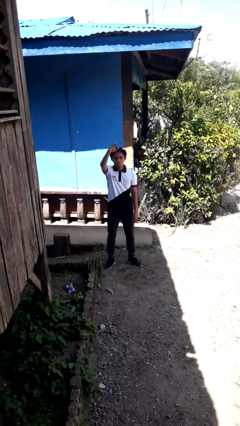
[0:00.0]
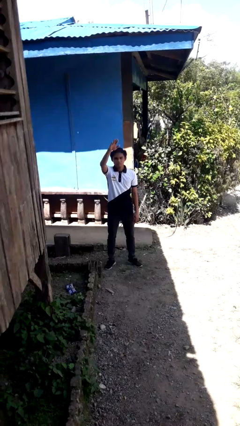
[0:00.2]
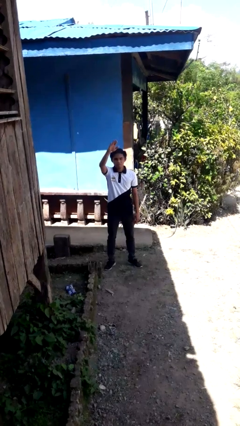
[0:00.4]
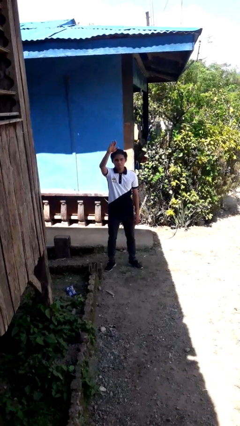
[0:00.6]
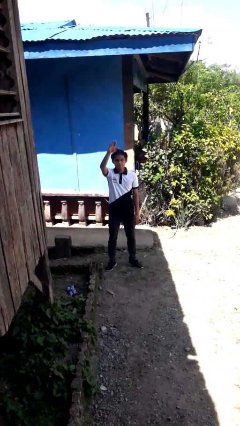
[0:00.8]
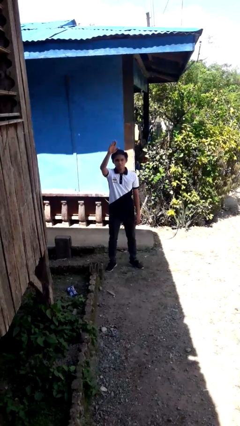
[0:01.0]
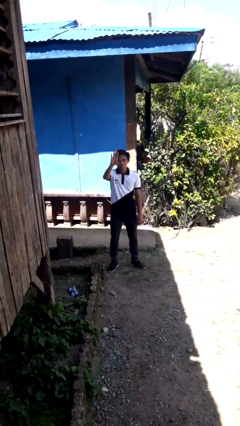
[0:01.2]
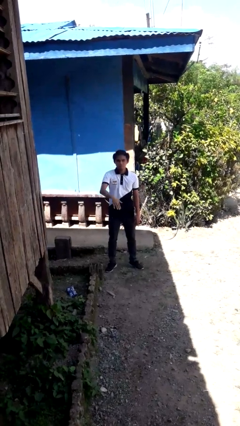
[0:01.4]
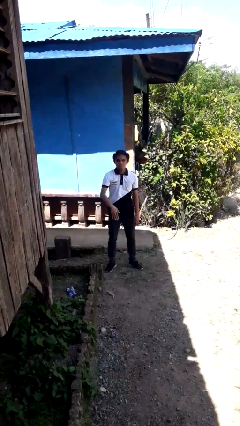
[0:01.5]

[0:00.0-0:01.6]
person gestures swipe up

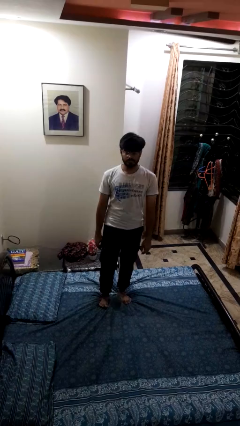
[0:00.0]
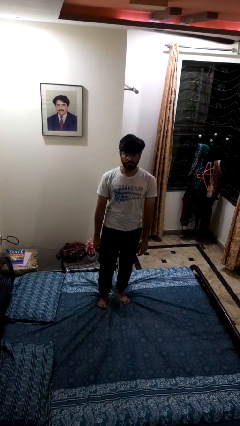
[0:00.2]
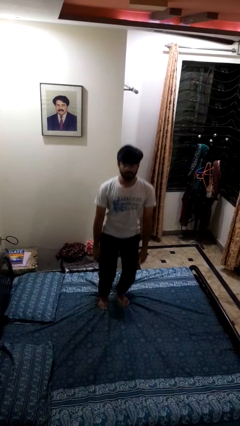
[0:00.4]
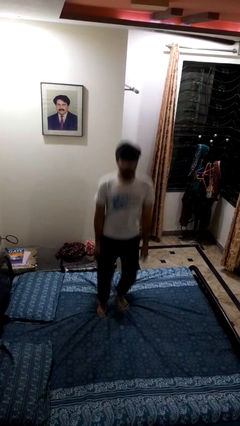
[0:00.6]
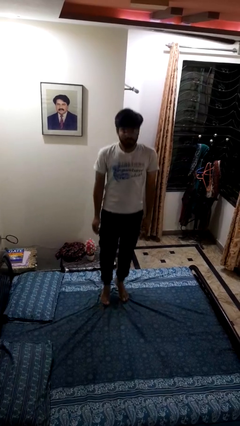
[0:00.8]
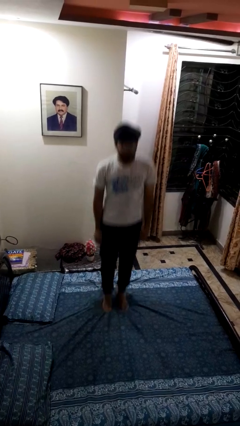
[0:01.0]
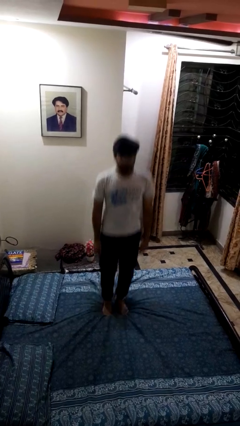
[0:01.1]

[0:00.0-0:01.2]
person jumps on bed

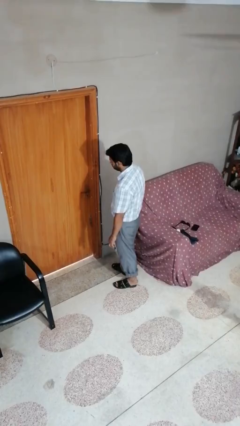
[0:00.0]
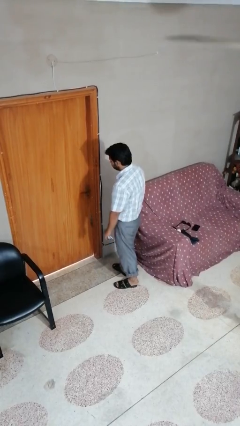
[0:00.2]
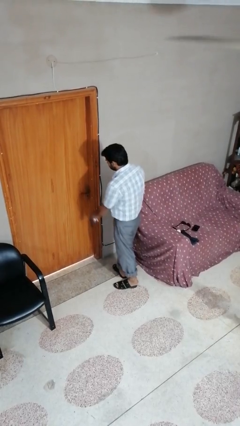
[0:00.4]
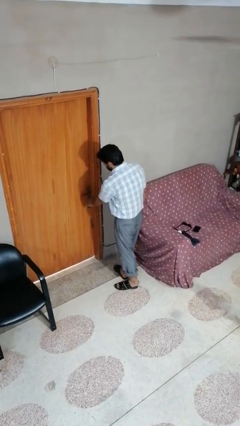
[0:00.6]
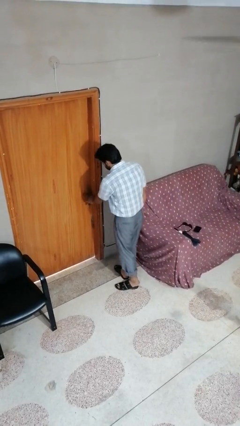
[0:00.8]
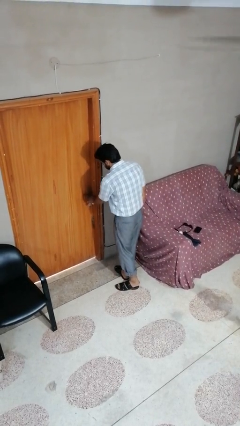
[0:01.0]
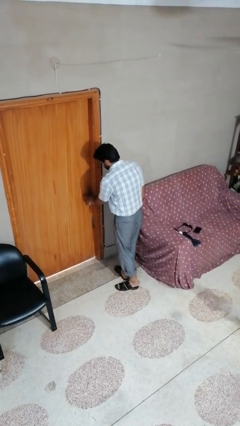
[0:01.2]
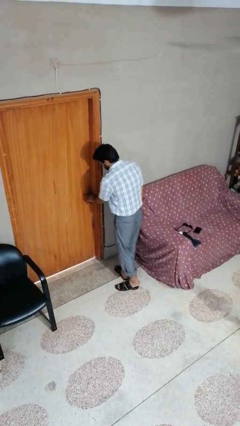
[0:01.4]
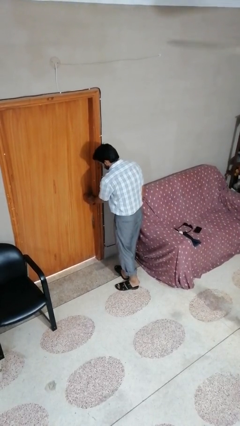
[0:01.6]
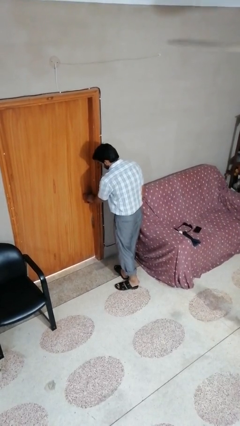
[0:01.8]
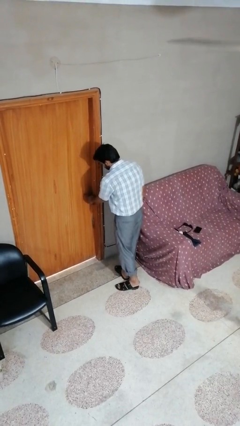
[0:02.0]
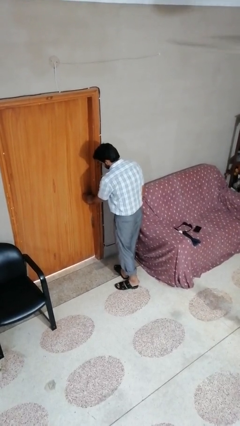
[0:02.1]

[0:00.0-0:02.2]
person unlocks door with keys

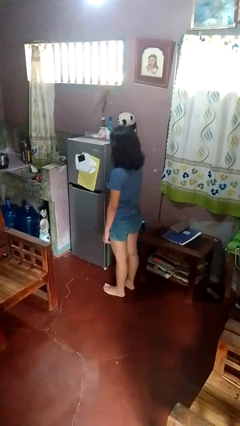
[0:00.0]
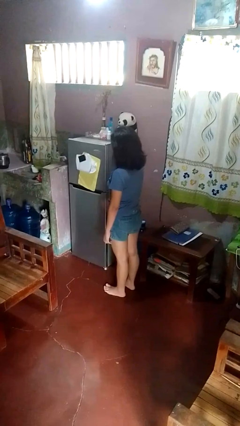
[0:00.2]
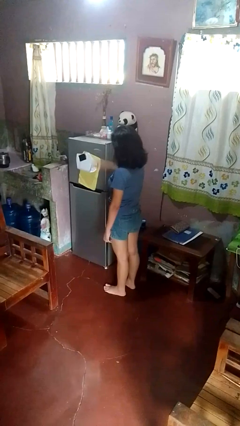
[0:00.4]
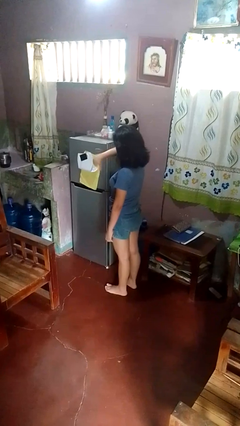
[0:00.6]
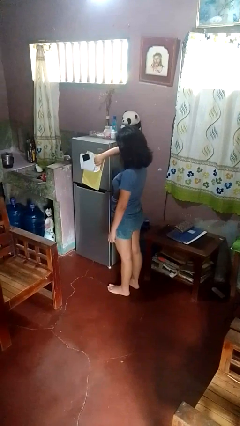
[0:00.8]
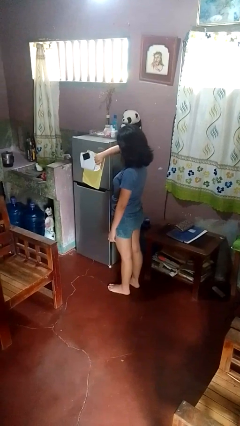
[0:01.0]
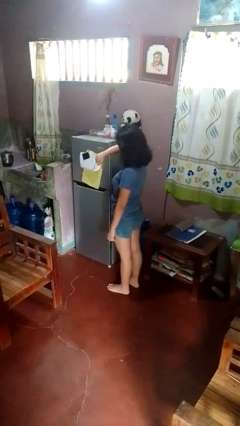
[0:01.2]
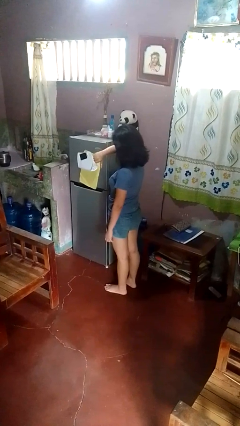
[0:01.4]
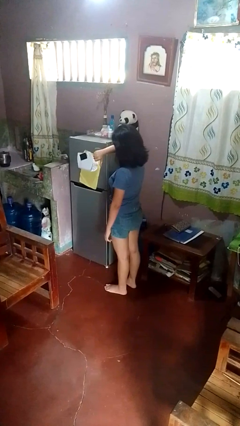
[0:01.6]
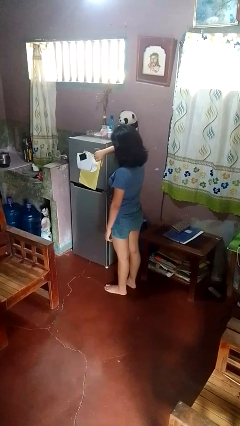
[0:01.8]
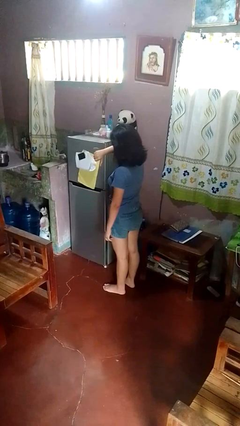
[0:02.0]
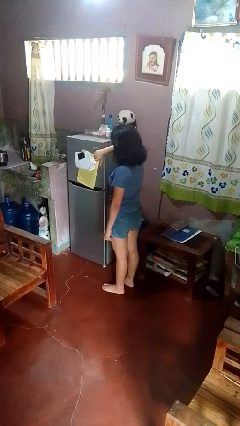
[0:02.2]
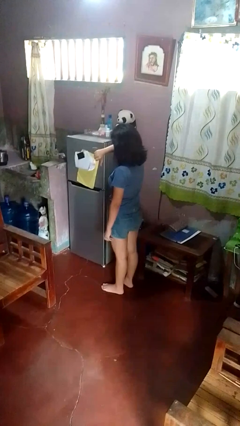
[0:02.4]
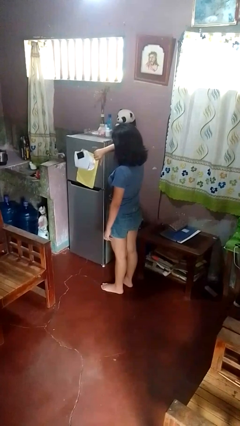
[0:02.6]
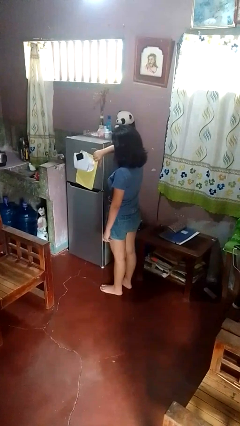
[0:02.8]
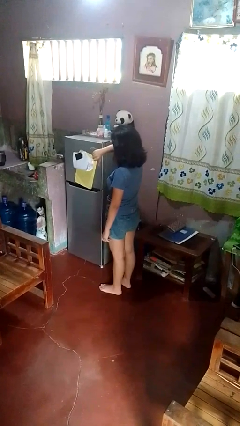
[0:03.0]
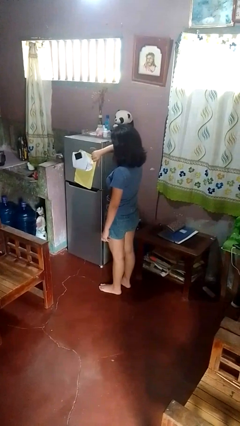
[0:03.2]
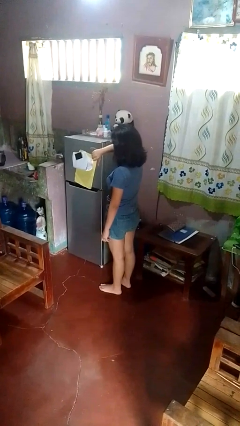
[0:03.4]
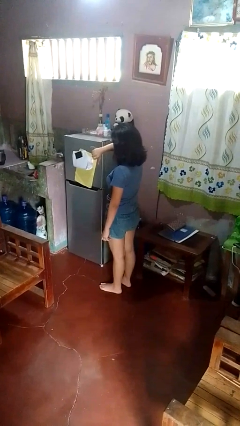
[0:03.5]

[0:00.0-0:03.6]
person gestures thumbs down

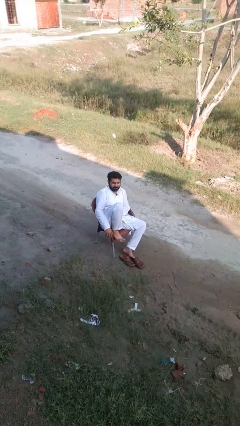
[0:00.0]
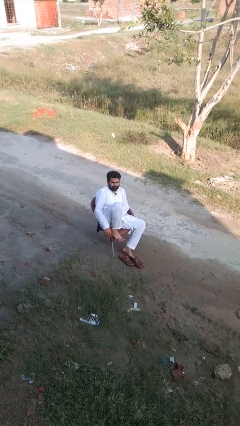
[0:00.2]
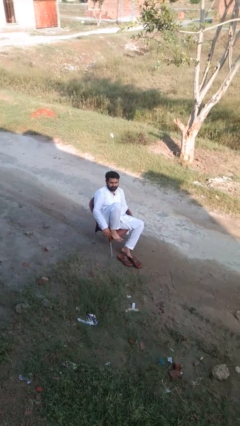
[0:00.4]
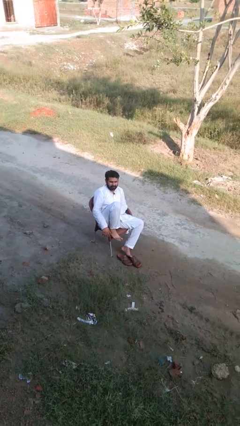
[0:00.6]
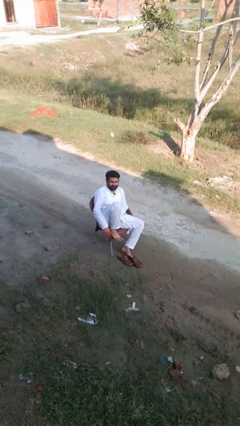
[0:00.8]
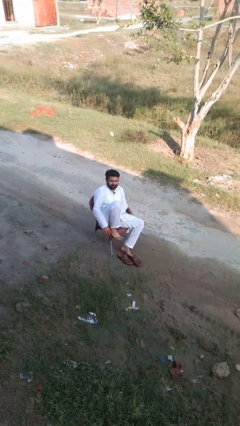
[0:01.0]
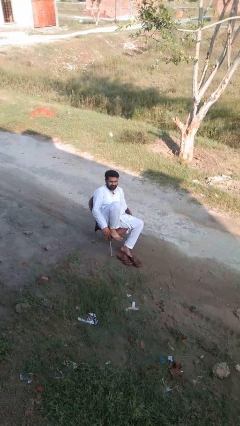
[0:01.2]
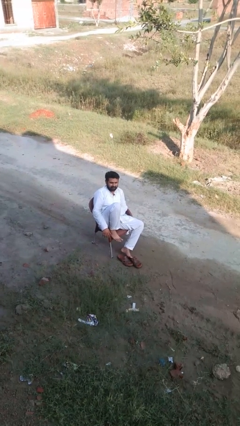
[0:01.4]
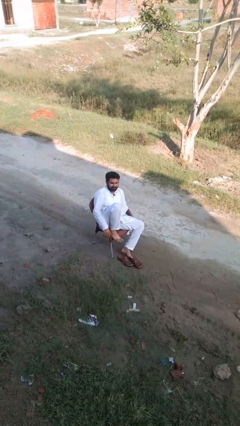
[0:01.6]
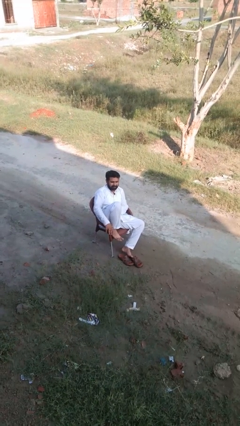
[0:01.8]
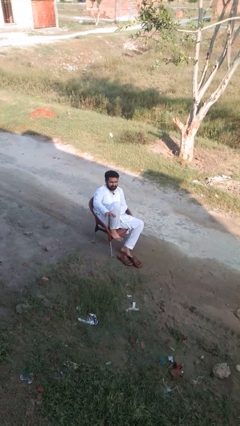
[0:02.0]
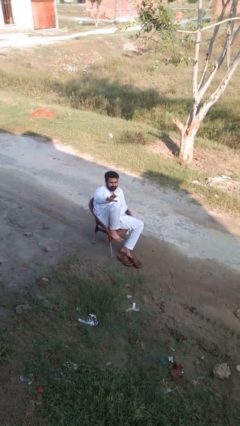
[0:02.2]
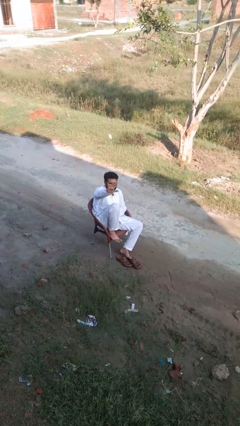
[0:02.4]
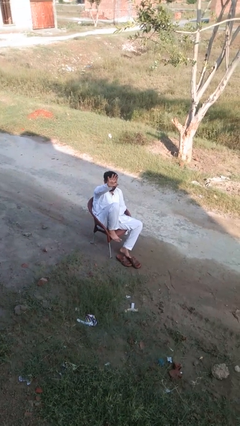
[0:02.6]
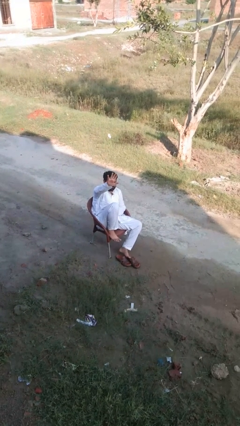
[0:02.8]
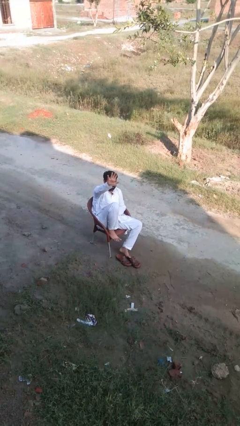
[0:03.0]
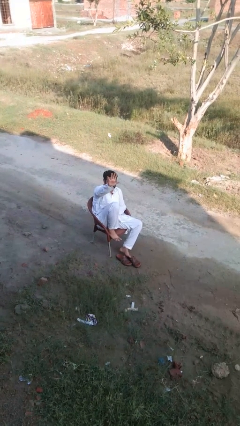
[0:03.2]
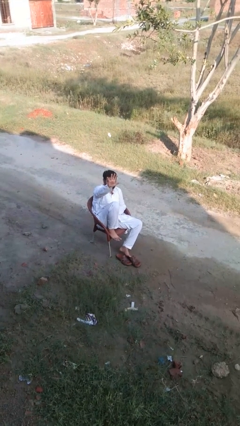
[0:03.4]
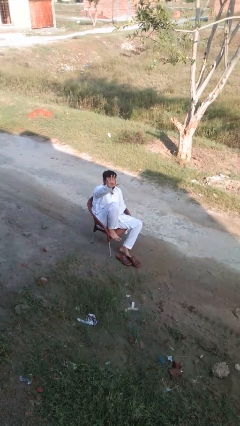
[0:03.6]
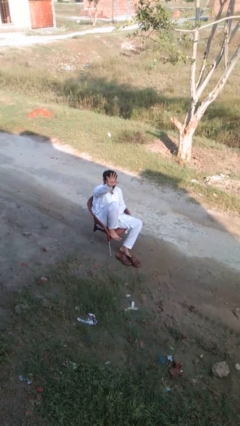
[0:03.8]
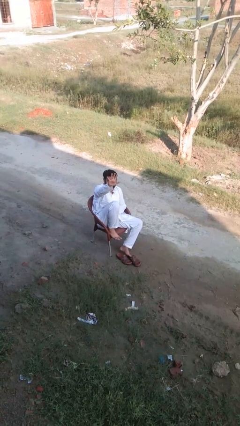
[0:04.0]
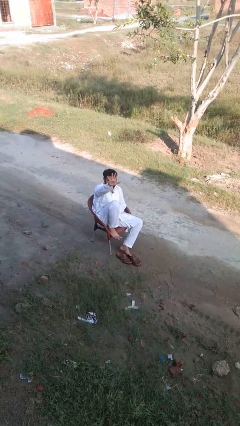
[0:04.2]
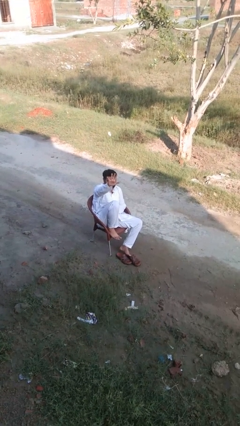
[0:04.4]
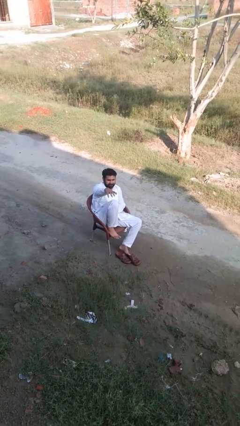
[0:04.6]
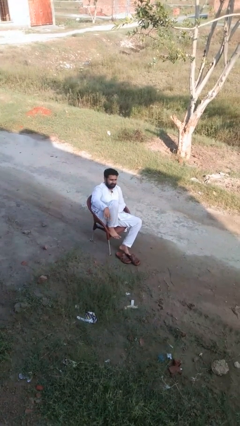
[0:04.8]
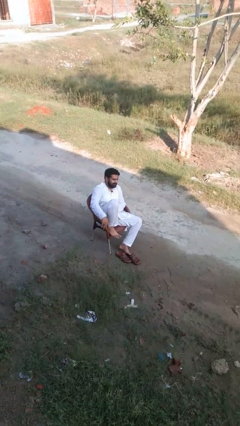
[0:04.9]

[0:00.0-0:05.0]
person gestures number five

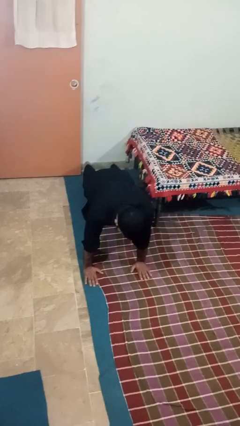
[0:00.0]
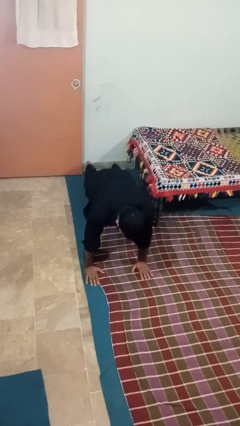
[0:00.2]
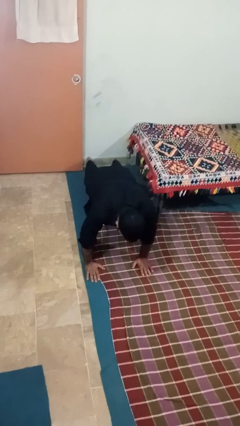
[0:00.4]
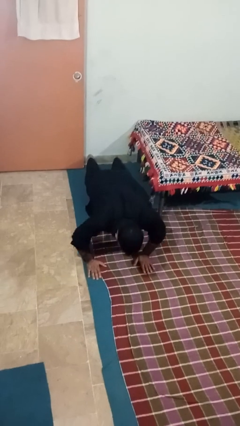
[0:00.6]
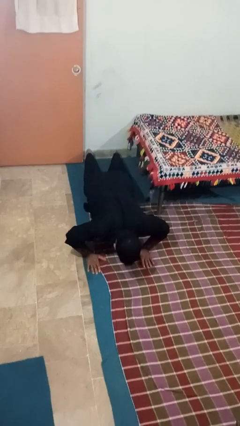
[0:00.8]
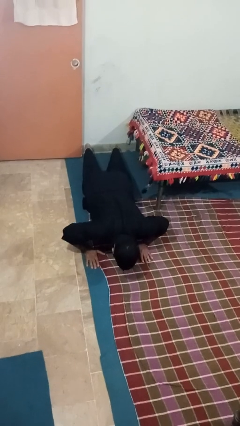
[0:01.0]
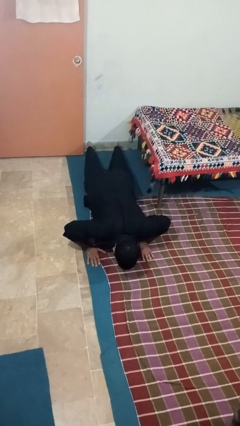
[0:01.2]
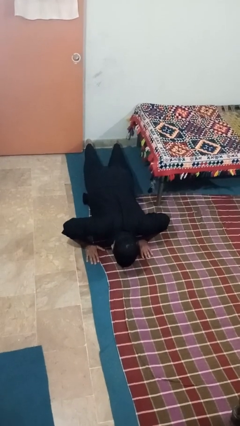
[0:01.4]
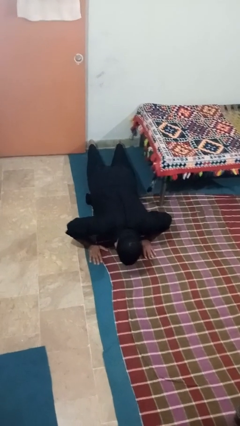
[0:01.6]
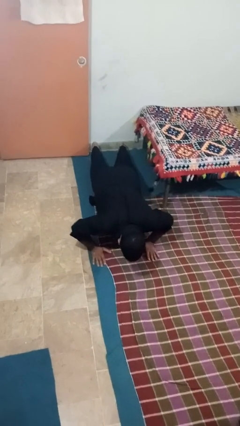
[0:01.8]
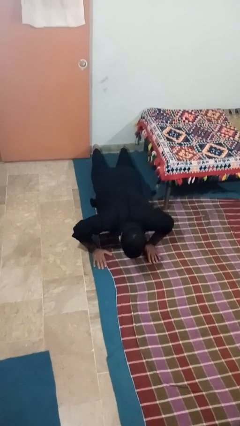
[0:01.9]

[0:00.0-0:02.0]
person exercises with pushup

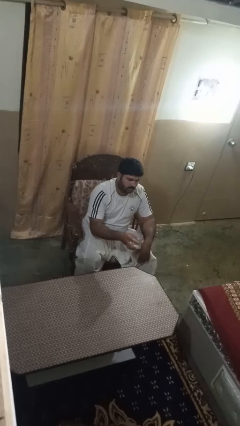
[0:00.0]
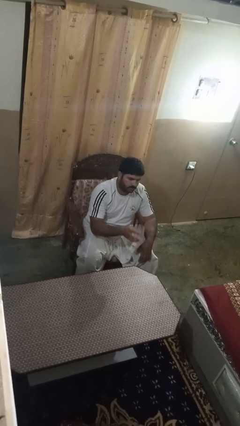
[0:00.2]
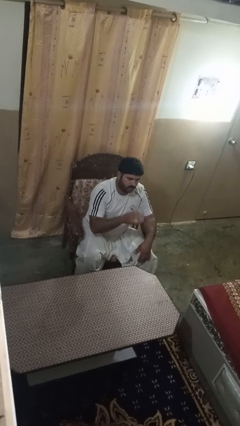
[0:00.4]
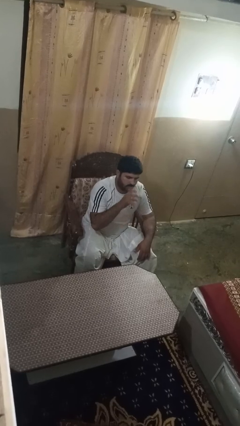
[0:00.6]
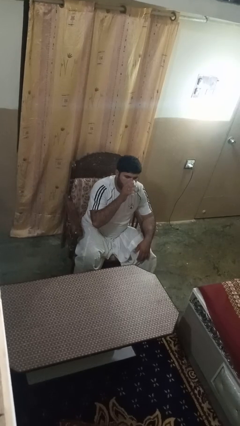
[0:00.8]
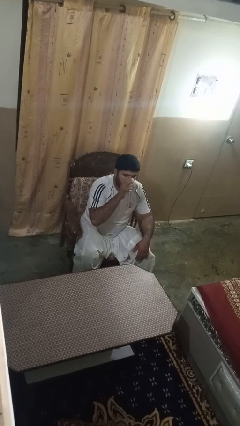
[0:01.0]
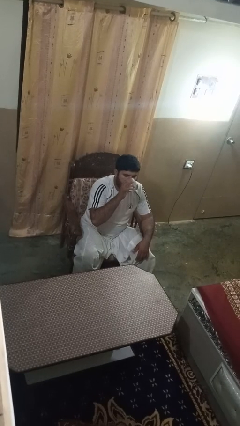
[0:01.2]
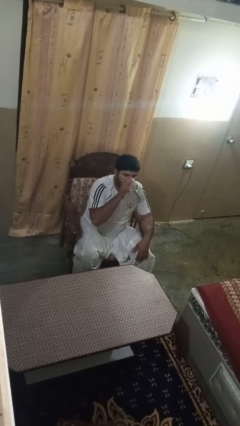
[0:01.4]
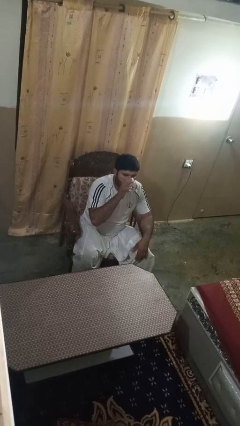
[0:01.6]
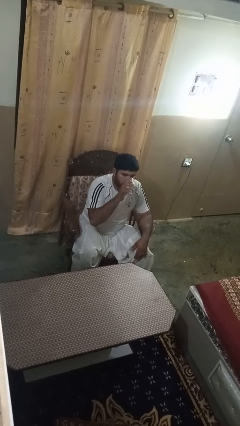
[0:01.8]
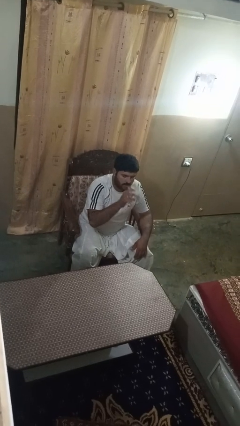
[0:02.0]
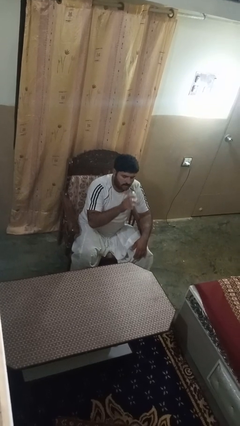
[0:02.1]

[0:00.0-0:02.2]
person drinks from shotglass
